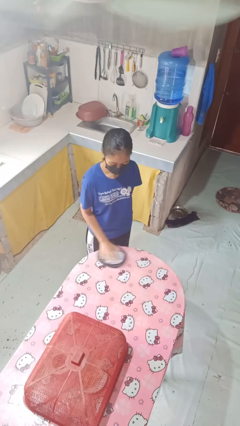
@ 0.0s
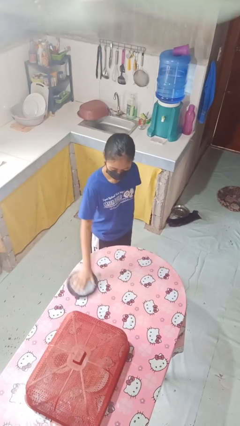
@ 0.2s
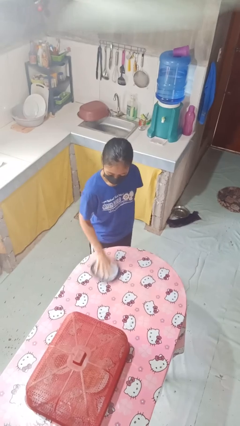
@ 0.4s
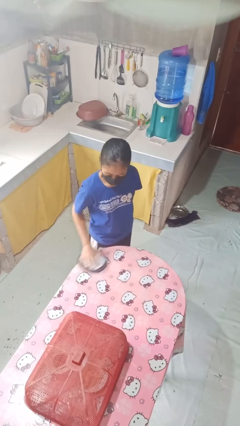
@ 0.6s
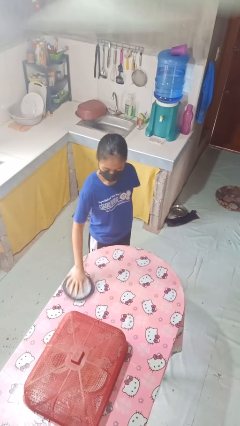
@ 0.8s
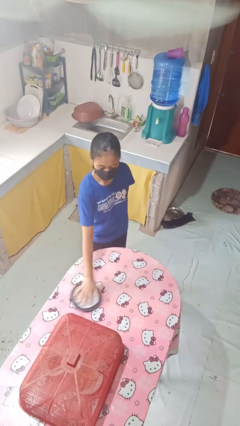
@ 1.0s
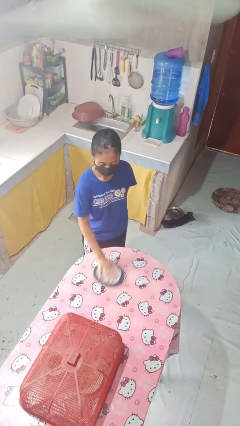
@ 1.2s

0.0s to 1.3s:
person cleans table with rag

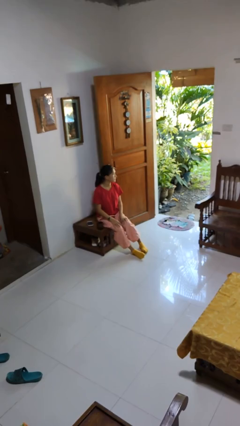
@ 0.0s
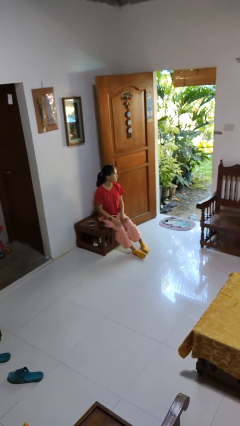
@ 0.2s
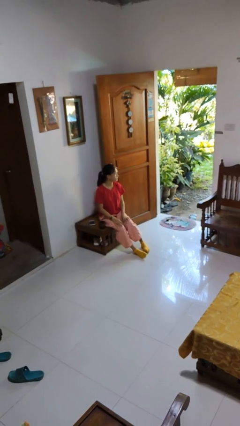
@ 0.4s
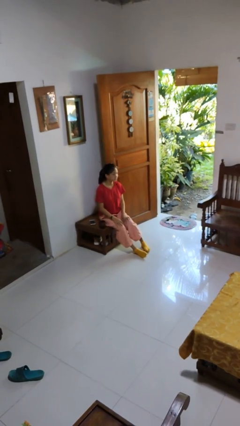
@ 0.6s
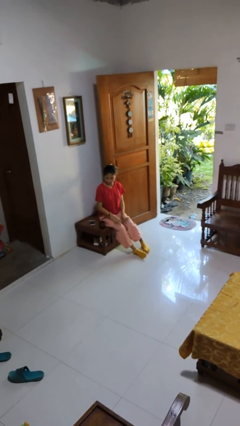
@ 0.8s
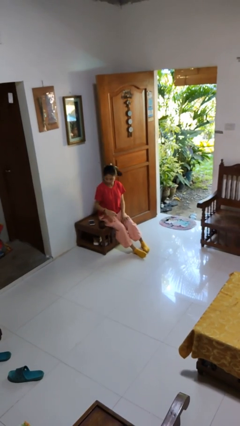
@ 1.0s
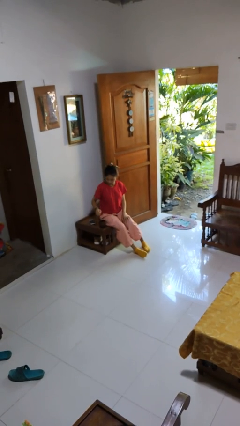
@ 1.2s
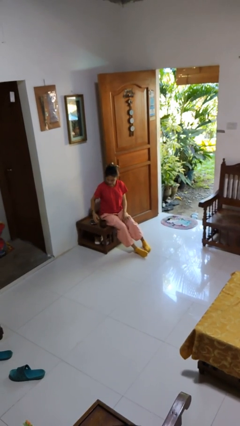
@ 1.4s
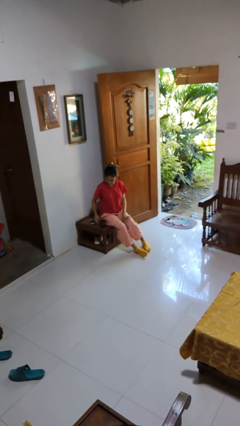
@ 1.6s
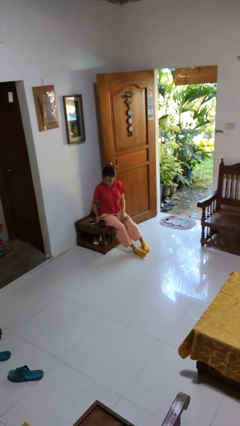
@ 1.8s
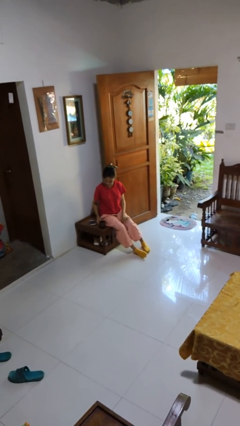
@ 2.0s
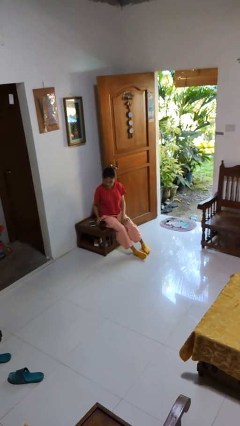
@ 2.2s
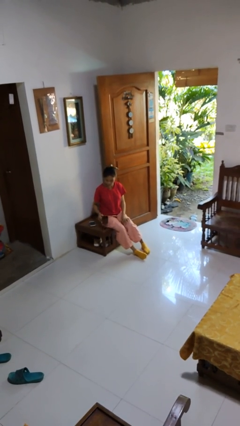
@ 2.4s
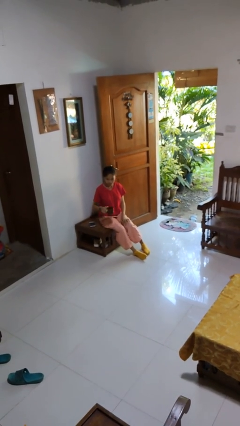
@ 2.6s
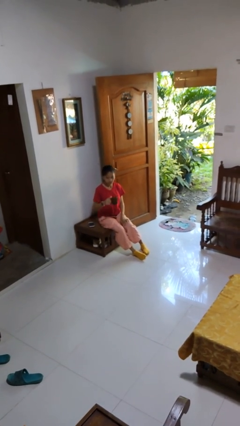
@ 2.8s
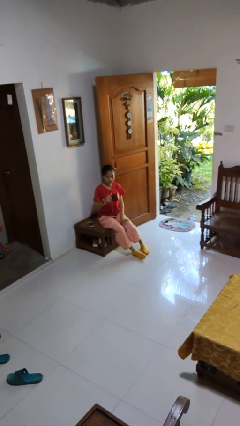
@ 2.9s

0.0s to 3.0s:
person picks up object from table

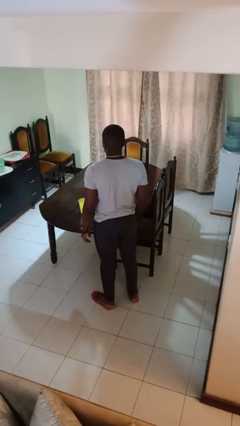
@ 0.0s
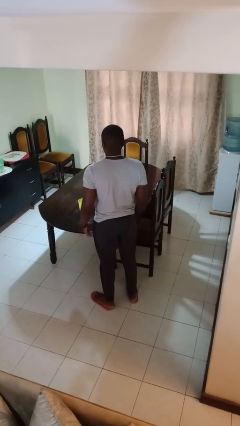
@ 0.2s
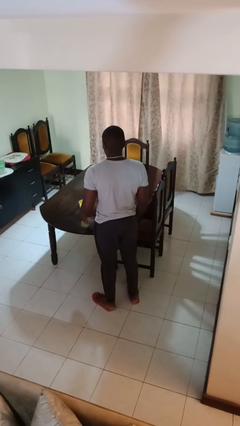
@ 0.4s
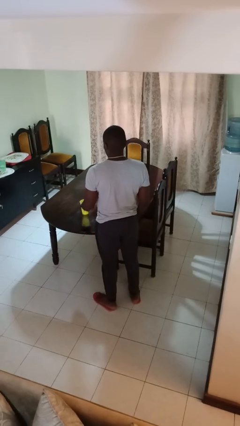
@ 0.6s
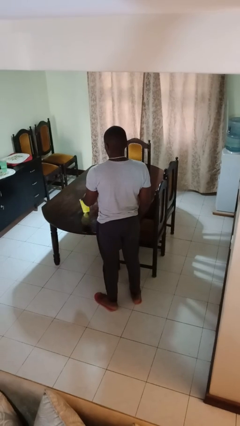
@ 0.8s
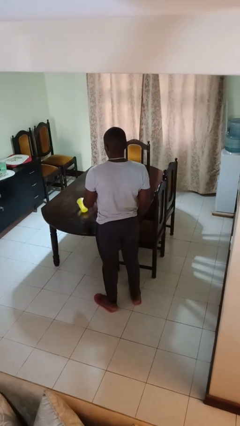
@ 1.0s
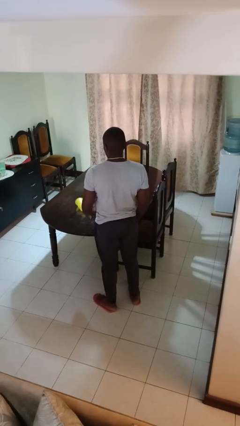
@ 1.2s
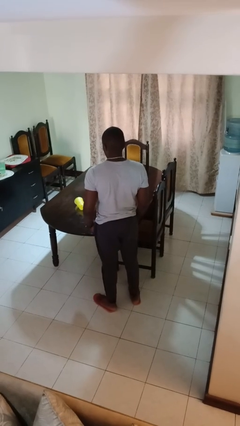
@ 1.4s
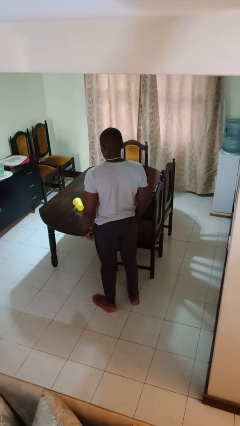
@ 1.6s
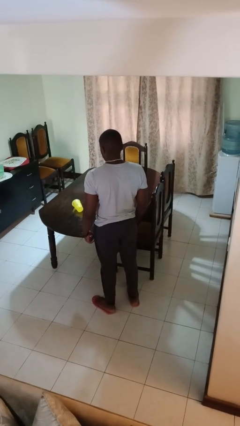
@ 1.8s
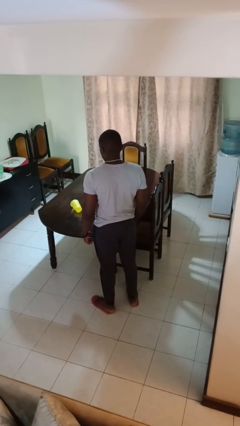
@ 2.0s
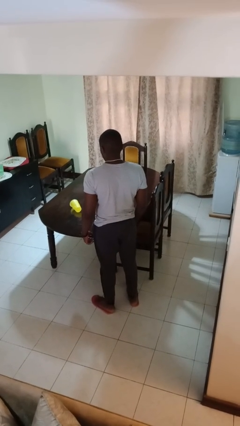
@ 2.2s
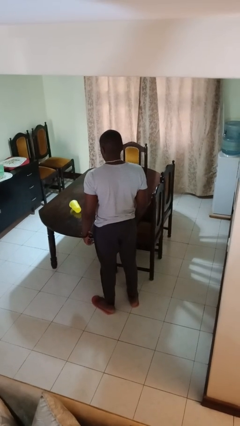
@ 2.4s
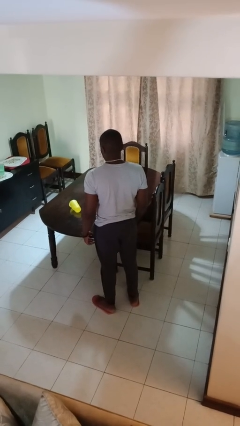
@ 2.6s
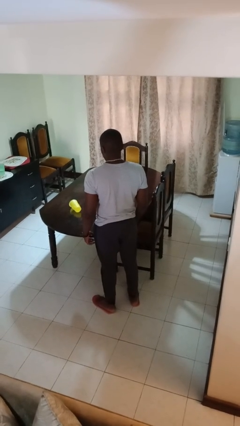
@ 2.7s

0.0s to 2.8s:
person knocks over glass

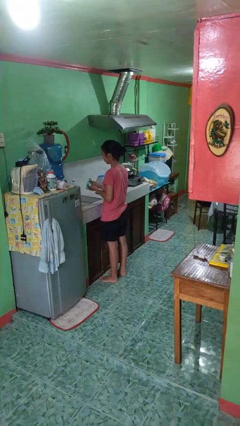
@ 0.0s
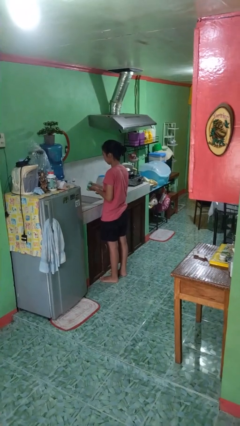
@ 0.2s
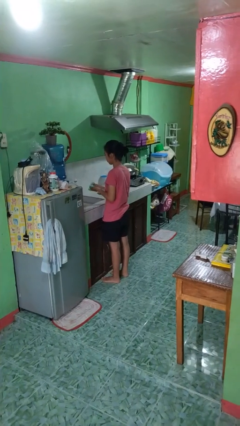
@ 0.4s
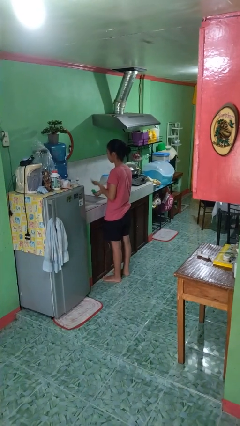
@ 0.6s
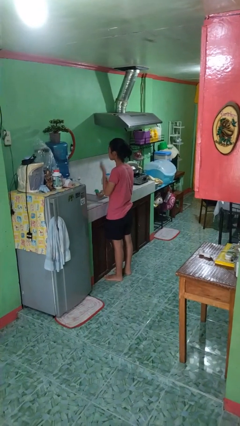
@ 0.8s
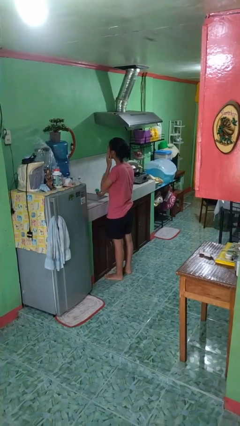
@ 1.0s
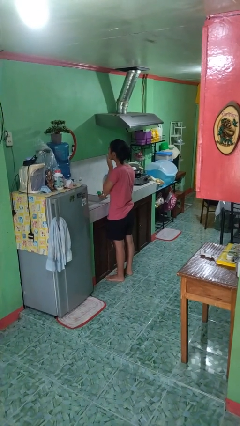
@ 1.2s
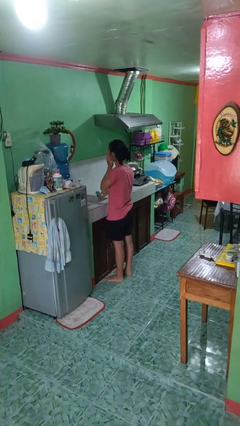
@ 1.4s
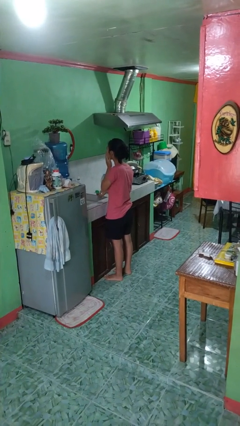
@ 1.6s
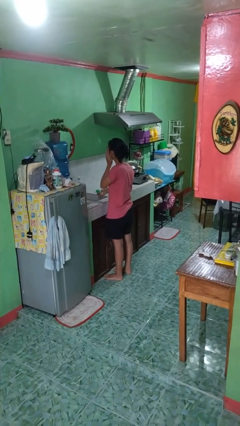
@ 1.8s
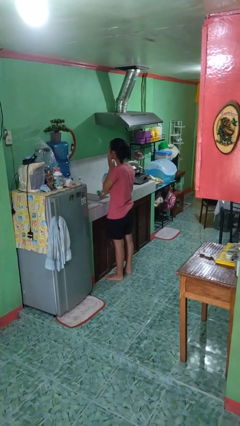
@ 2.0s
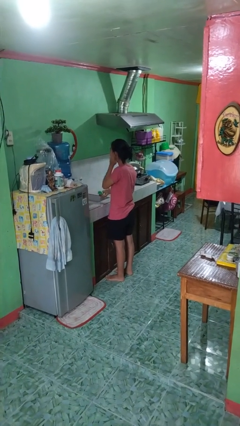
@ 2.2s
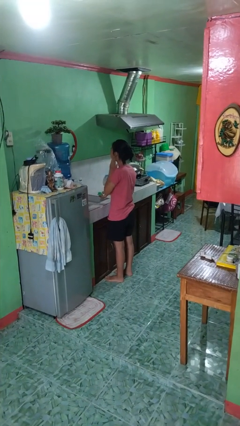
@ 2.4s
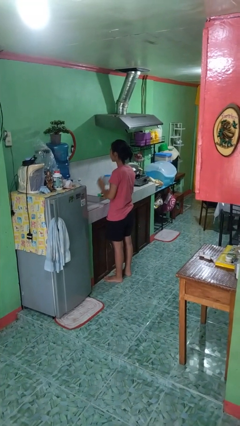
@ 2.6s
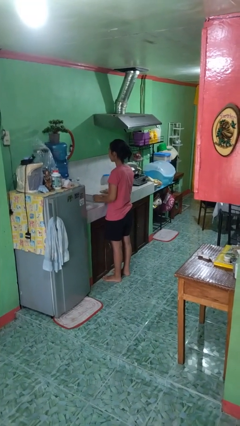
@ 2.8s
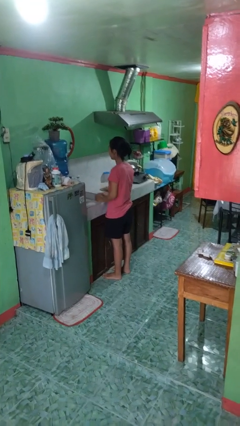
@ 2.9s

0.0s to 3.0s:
person applies facial moisturizer

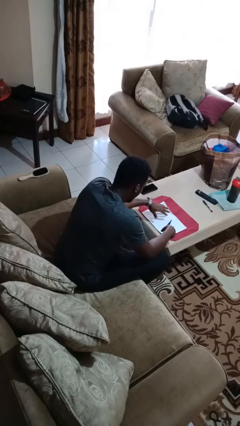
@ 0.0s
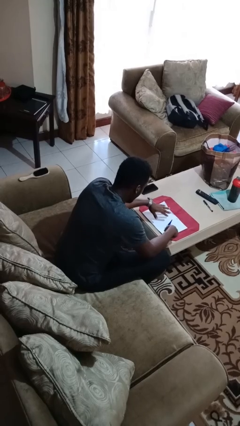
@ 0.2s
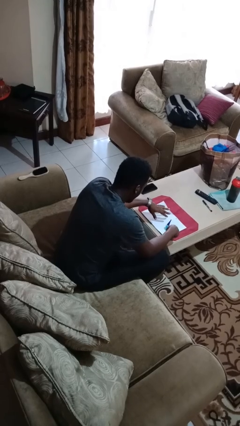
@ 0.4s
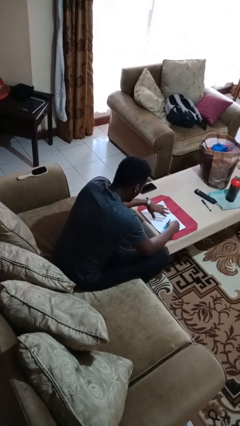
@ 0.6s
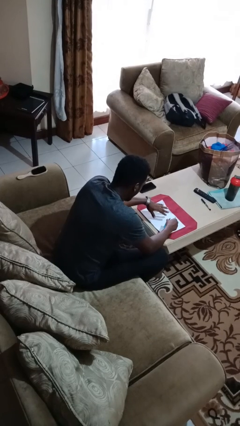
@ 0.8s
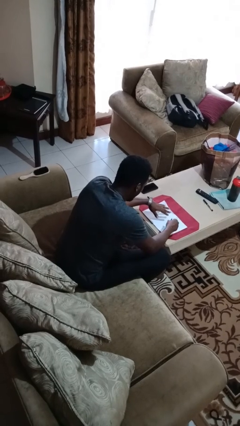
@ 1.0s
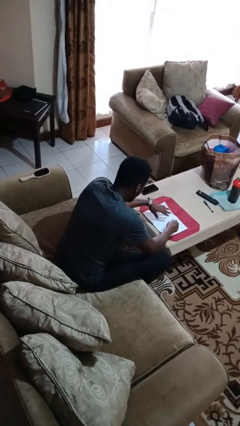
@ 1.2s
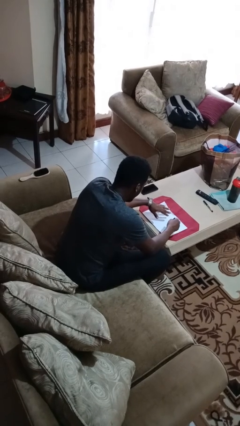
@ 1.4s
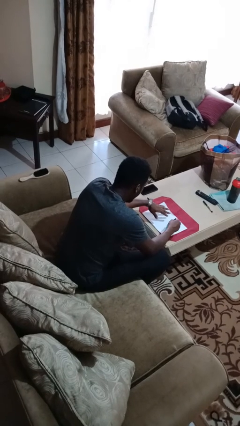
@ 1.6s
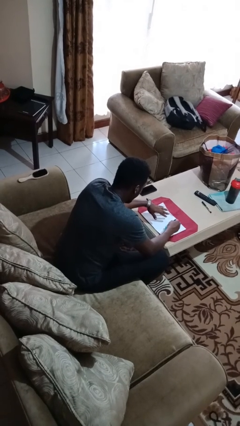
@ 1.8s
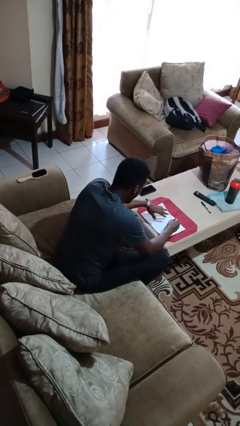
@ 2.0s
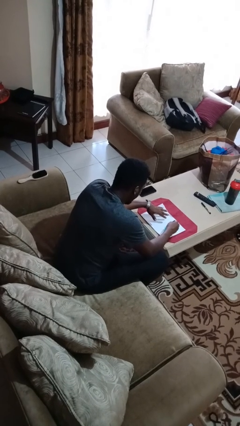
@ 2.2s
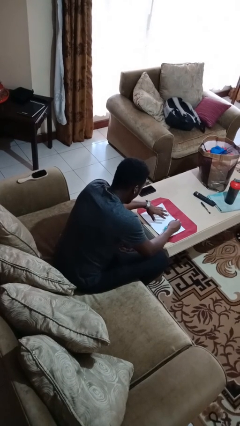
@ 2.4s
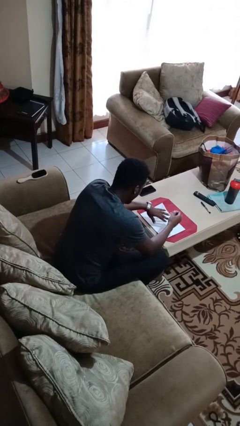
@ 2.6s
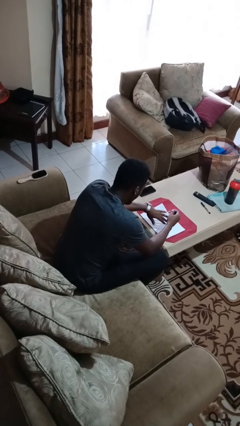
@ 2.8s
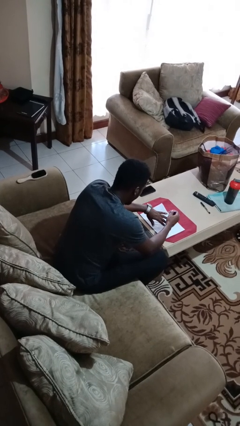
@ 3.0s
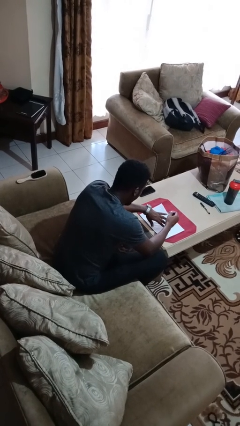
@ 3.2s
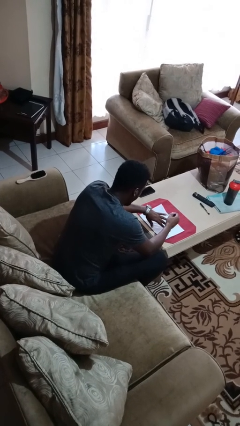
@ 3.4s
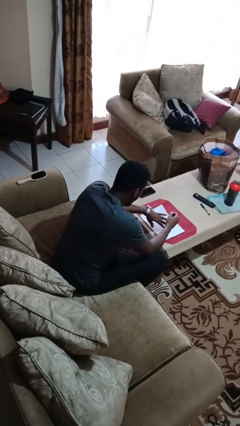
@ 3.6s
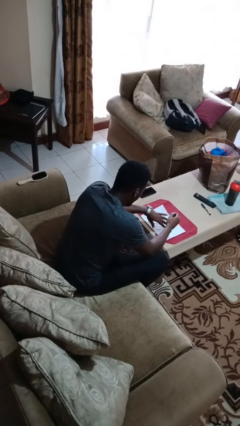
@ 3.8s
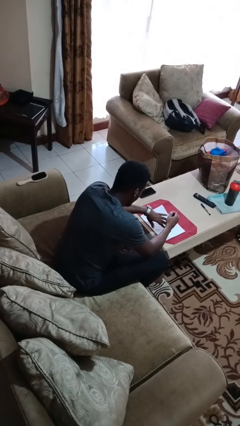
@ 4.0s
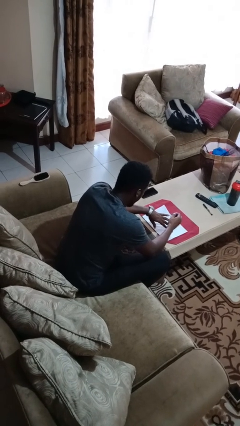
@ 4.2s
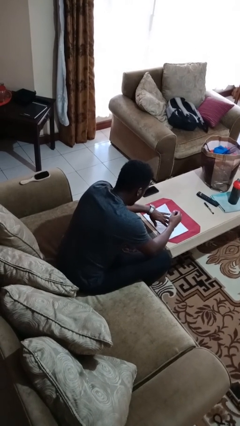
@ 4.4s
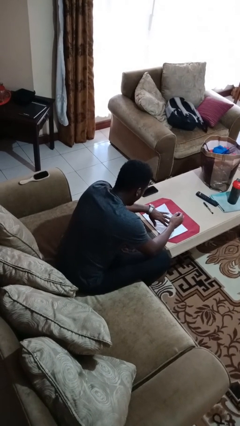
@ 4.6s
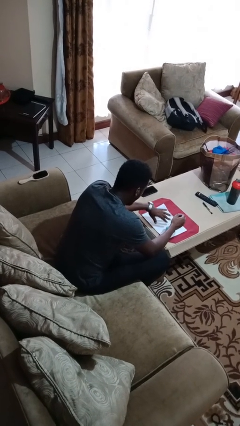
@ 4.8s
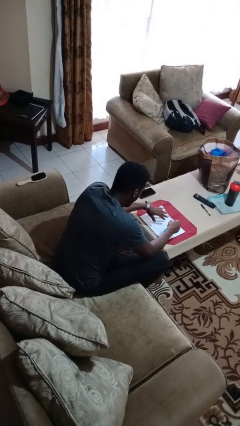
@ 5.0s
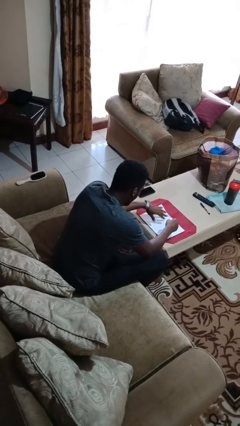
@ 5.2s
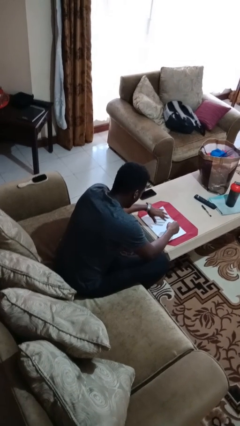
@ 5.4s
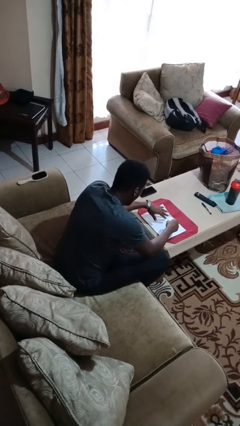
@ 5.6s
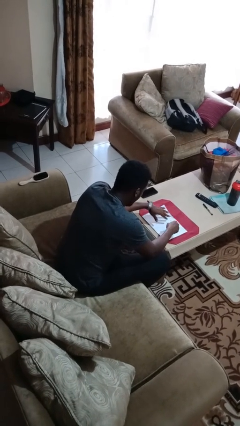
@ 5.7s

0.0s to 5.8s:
person paints fingernails

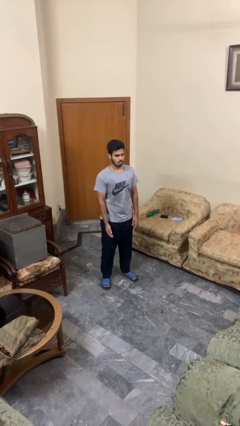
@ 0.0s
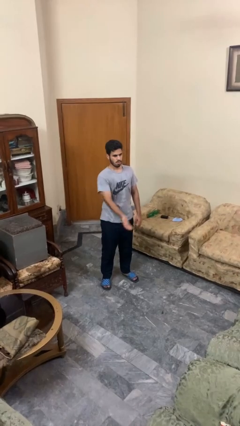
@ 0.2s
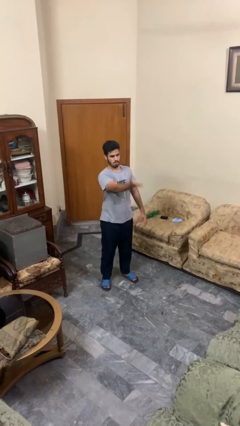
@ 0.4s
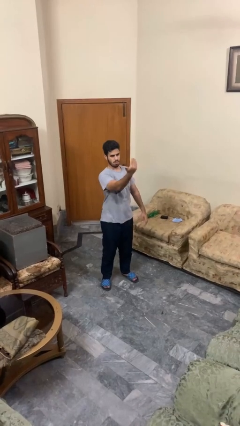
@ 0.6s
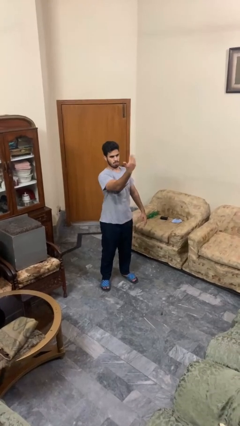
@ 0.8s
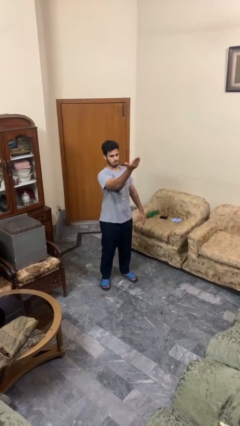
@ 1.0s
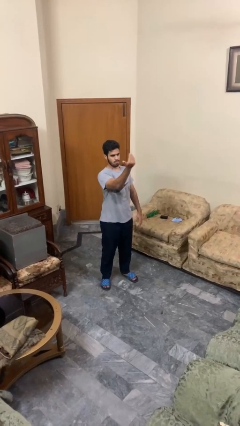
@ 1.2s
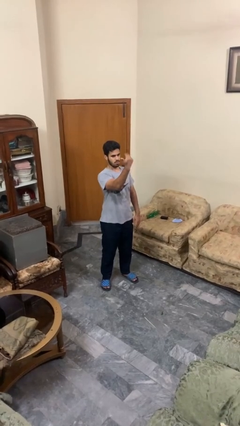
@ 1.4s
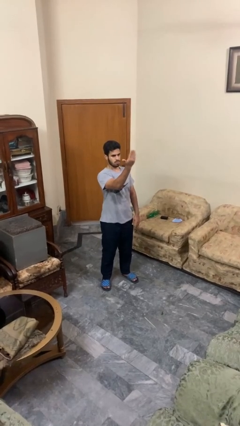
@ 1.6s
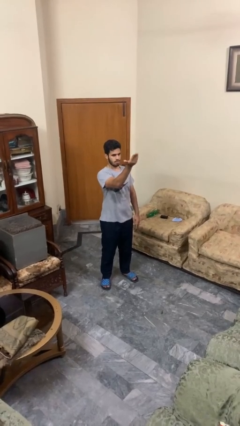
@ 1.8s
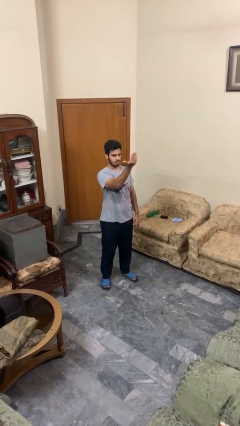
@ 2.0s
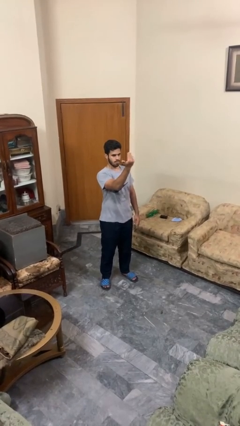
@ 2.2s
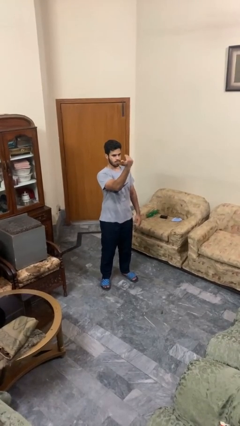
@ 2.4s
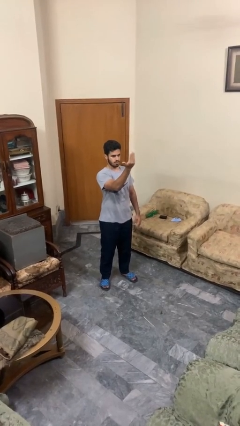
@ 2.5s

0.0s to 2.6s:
person gestures come here
